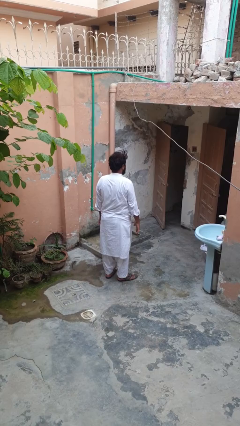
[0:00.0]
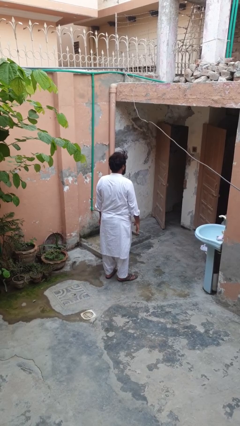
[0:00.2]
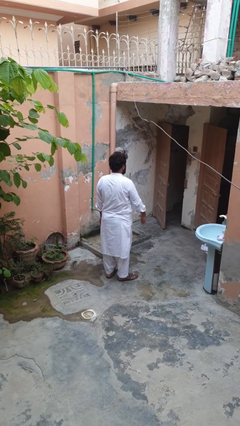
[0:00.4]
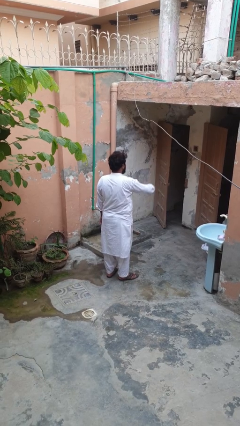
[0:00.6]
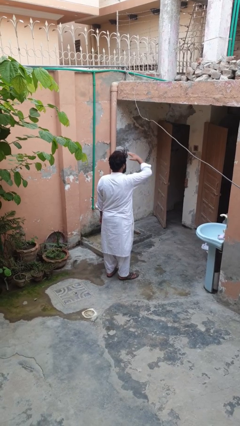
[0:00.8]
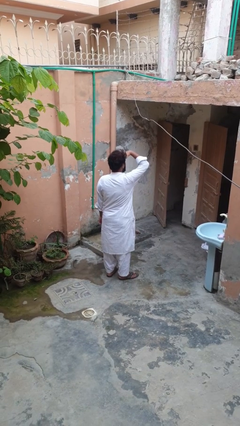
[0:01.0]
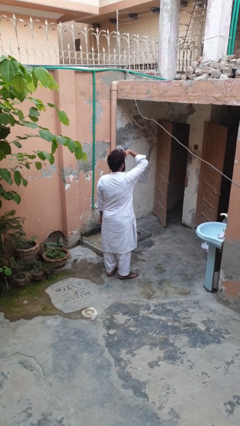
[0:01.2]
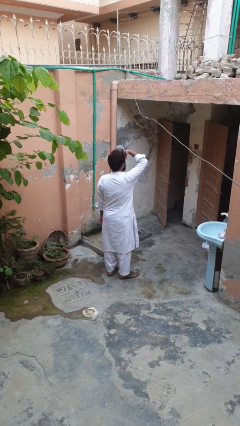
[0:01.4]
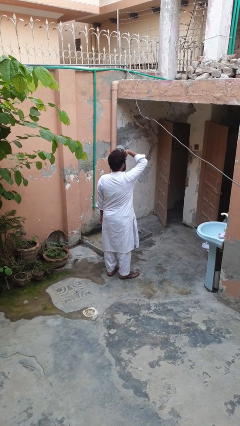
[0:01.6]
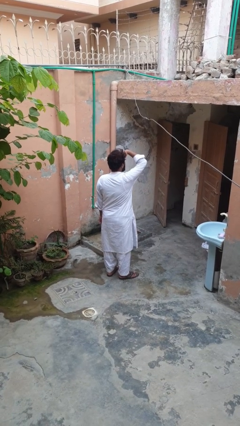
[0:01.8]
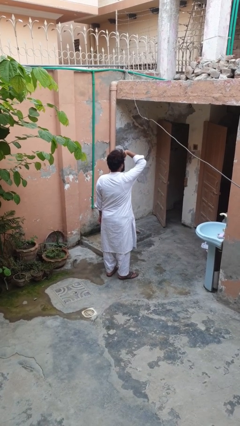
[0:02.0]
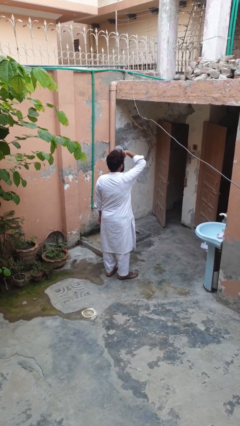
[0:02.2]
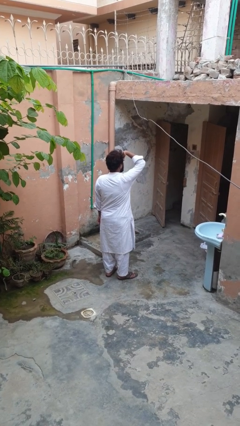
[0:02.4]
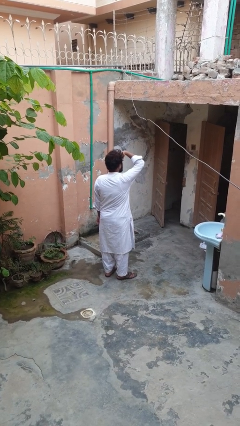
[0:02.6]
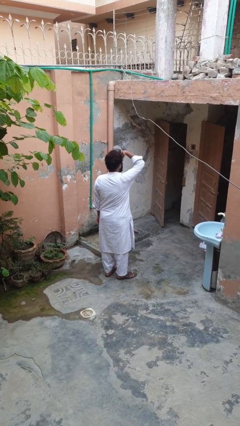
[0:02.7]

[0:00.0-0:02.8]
person shades eyes

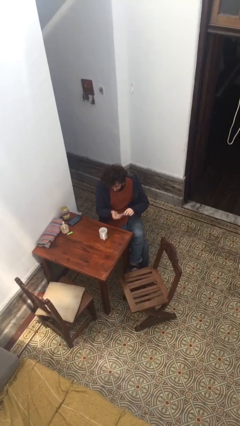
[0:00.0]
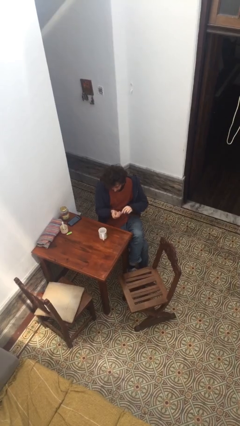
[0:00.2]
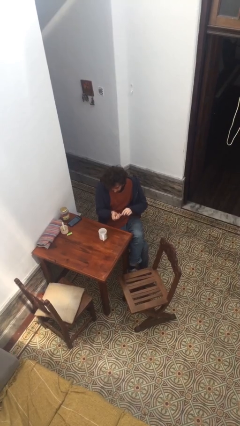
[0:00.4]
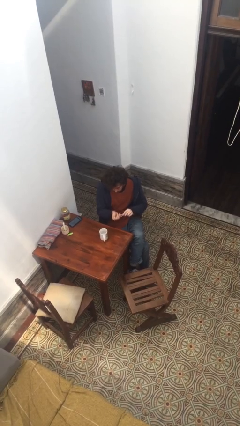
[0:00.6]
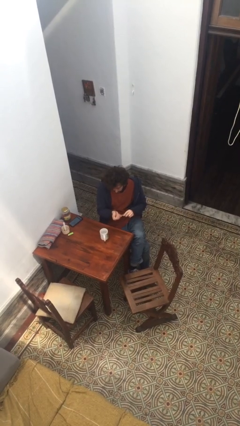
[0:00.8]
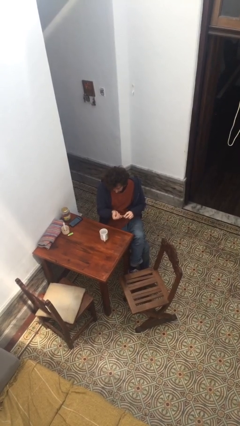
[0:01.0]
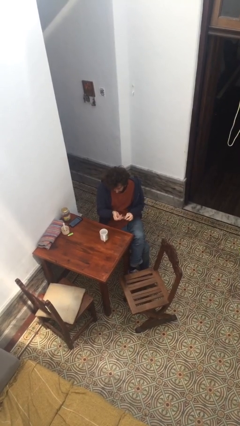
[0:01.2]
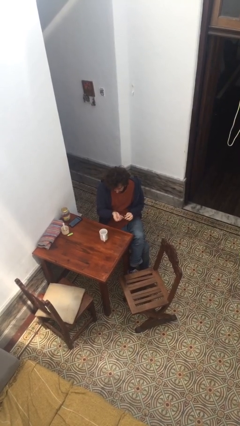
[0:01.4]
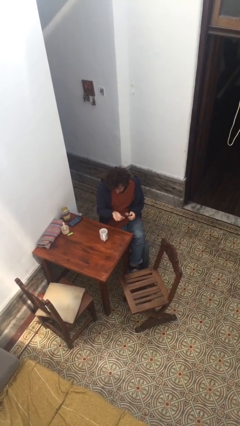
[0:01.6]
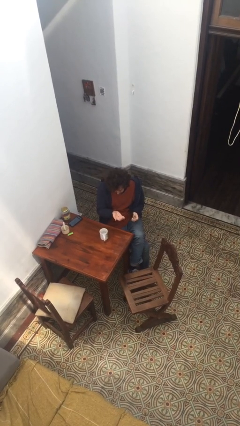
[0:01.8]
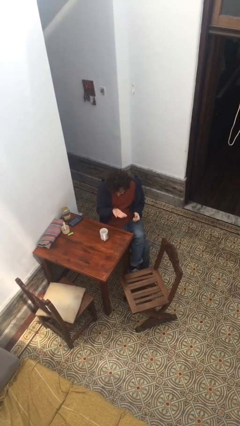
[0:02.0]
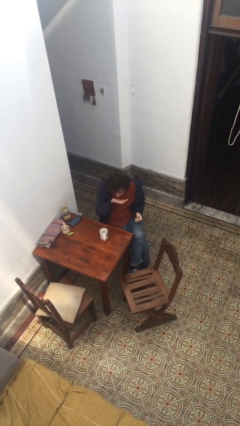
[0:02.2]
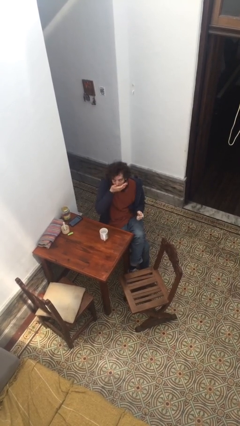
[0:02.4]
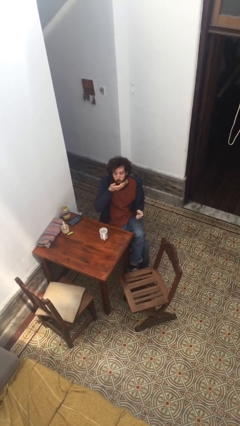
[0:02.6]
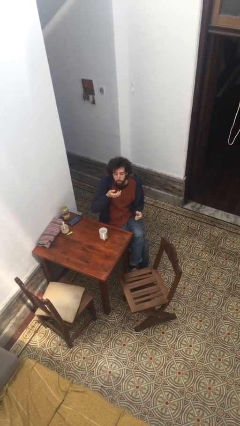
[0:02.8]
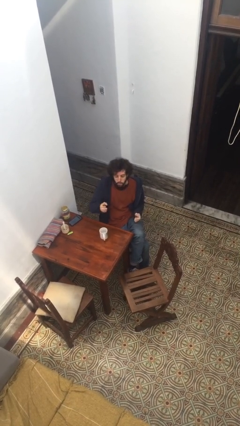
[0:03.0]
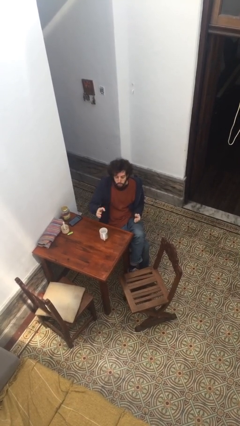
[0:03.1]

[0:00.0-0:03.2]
person takes medicine pills

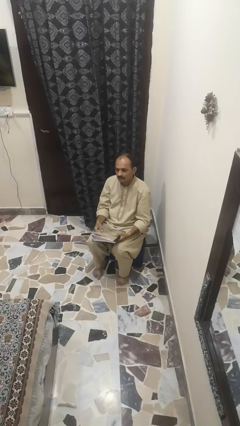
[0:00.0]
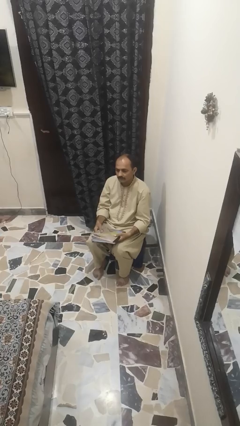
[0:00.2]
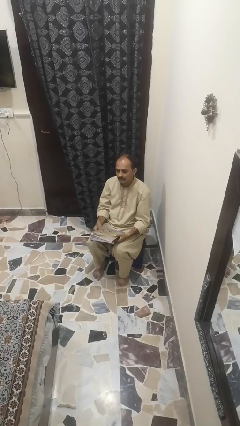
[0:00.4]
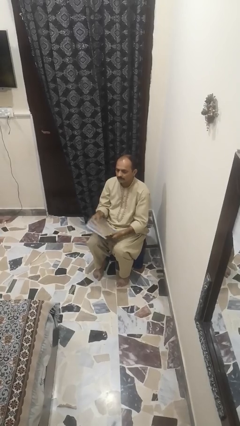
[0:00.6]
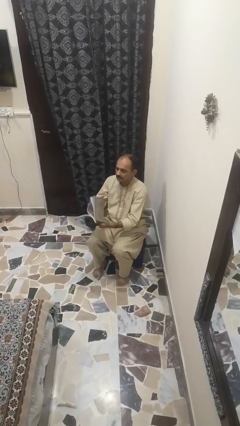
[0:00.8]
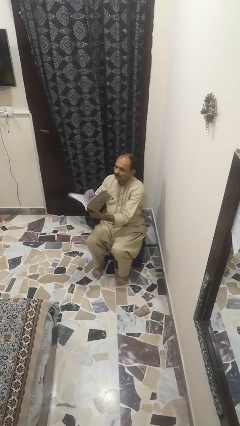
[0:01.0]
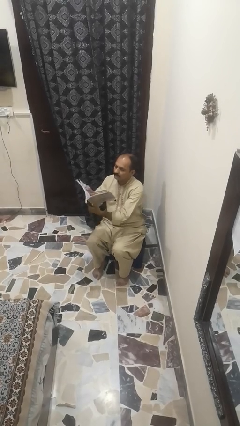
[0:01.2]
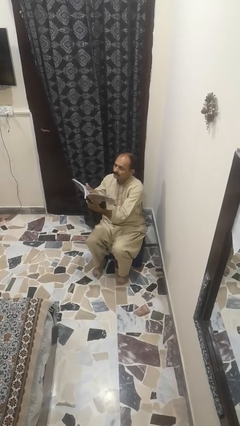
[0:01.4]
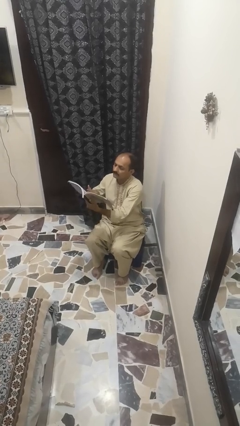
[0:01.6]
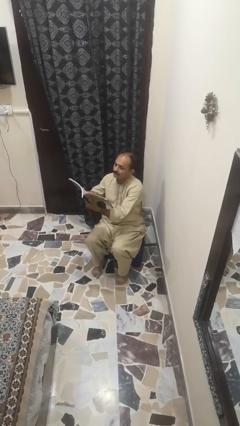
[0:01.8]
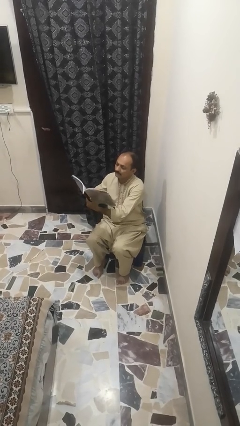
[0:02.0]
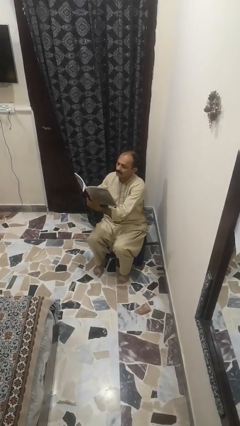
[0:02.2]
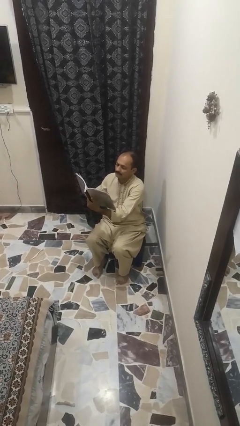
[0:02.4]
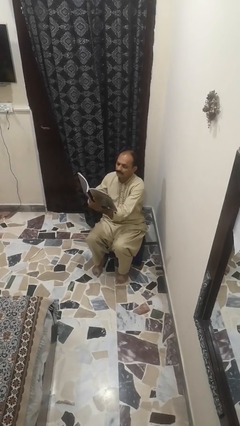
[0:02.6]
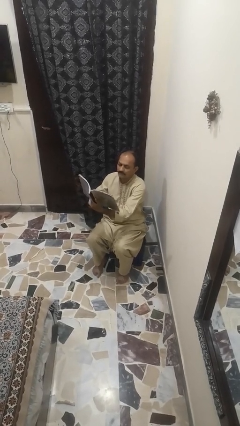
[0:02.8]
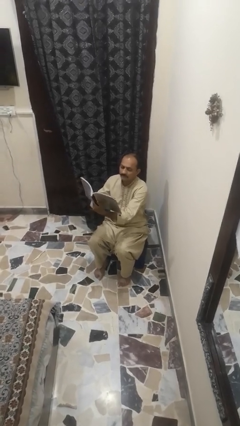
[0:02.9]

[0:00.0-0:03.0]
person reads book

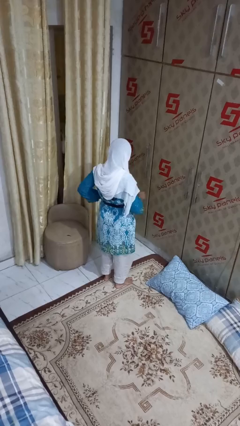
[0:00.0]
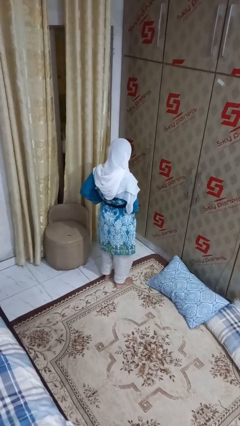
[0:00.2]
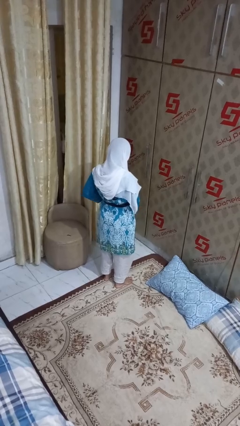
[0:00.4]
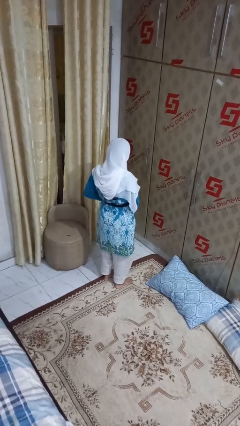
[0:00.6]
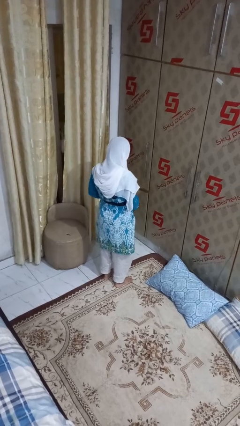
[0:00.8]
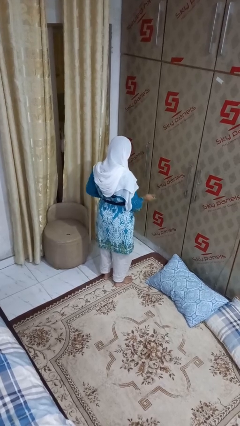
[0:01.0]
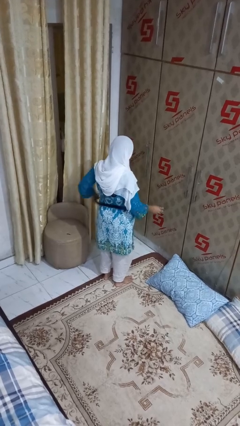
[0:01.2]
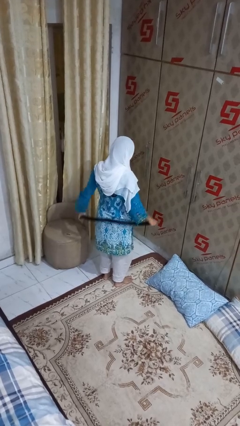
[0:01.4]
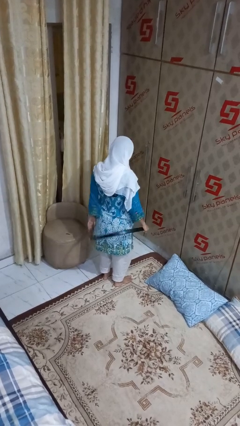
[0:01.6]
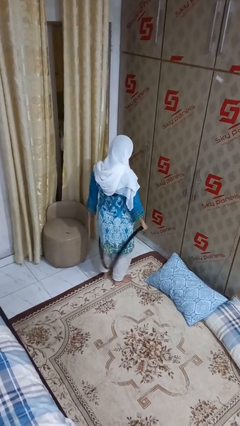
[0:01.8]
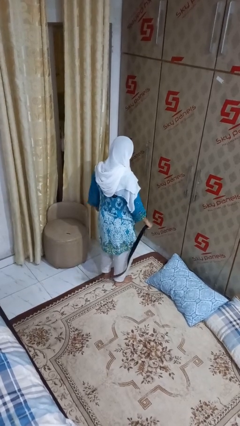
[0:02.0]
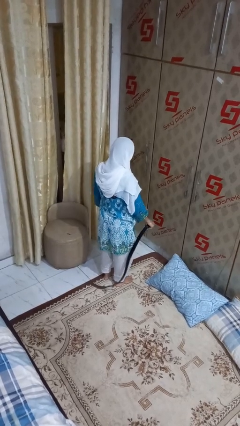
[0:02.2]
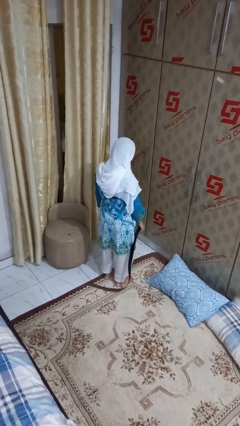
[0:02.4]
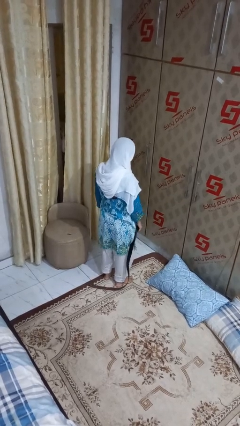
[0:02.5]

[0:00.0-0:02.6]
person takes off belt

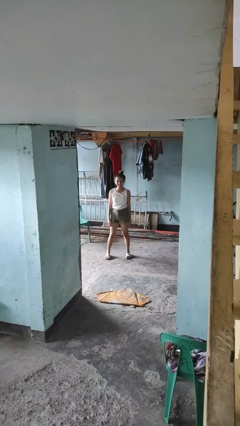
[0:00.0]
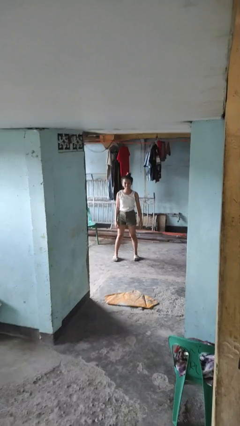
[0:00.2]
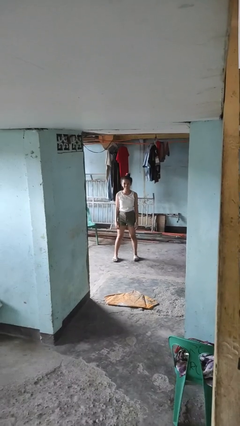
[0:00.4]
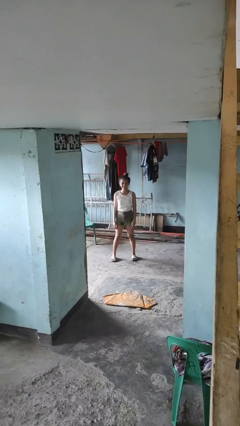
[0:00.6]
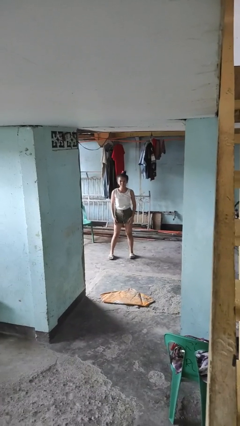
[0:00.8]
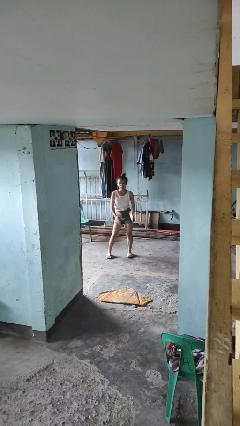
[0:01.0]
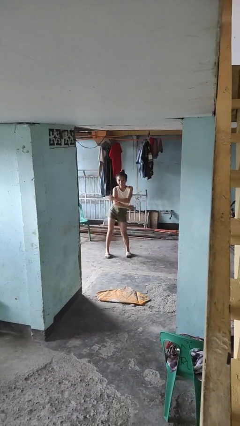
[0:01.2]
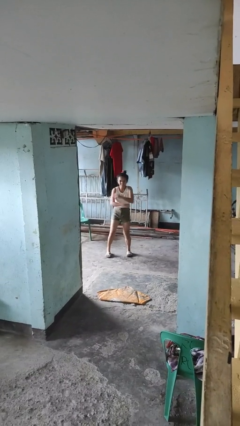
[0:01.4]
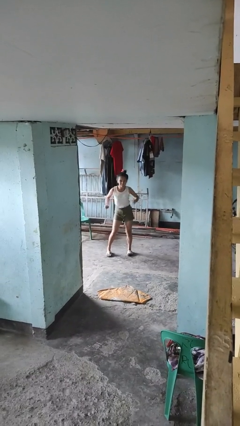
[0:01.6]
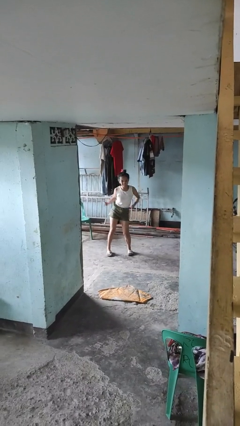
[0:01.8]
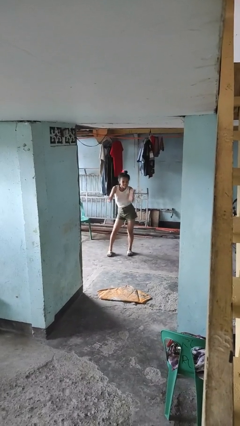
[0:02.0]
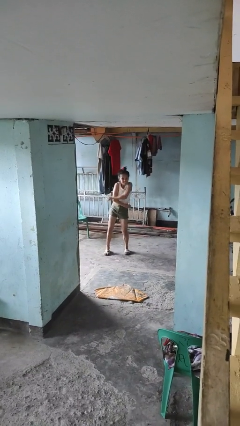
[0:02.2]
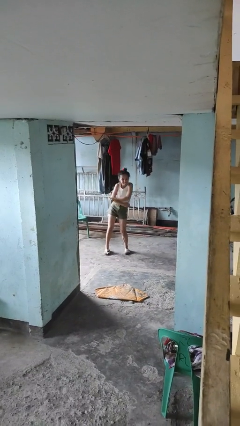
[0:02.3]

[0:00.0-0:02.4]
person dances in place

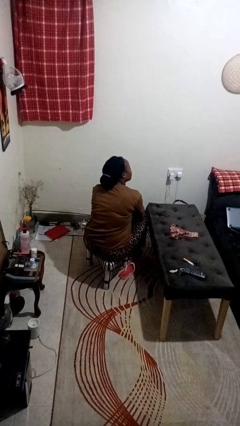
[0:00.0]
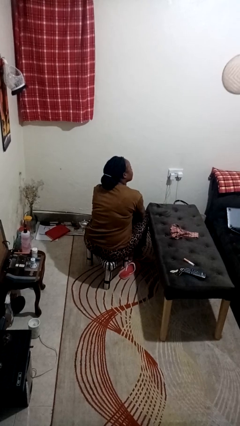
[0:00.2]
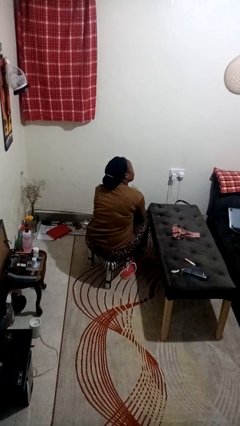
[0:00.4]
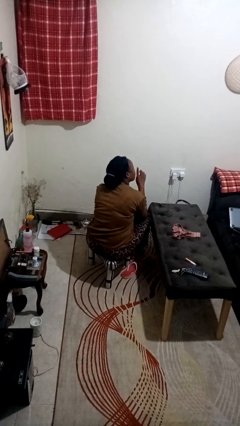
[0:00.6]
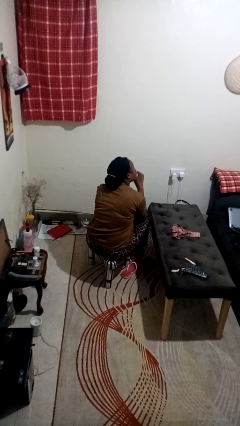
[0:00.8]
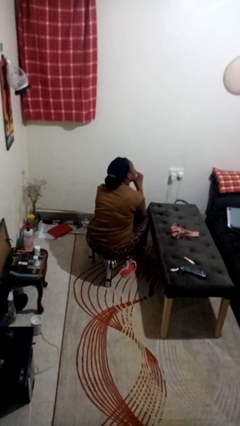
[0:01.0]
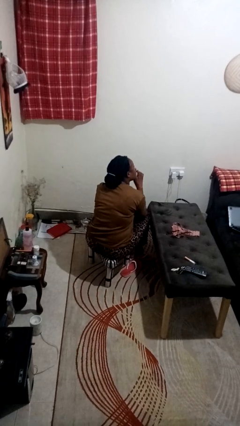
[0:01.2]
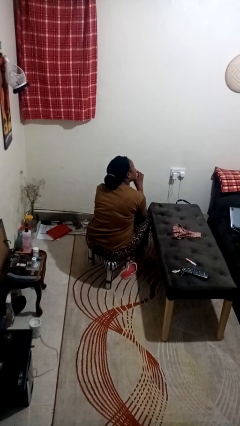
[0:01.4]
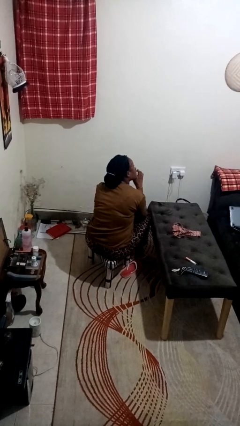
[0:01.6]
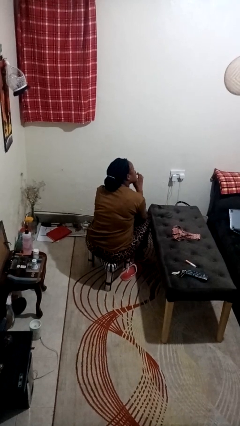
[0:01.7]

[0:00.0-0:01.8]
person gestures be quiet

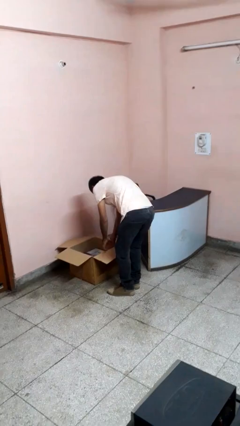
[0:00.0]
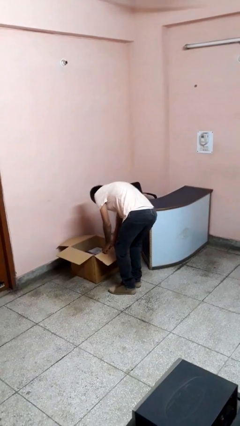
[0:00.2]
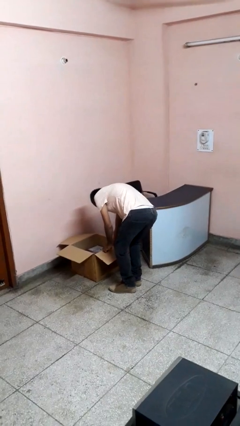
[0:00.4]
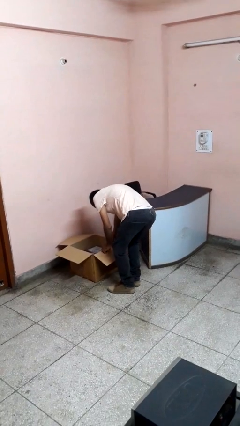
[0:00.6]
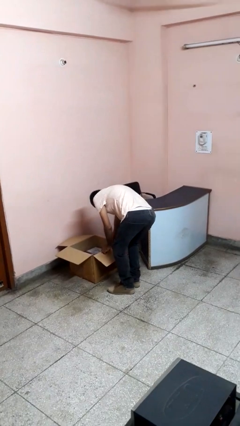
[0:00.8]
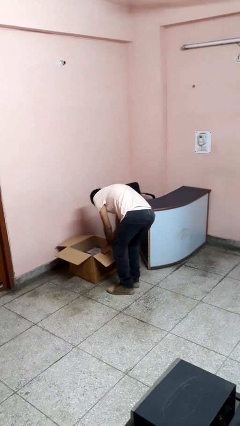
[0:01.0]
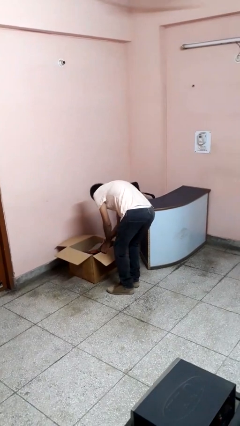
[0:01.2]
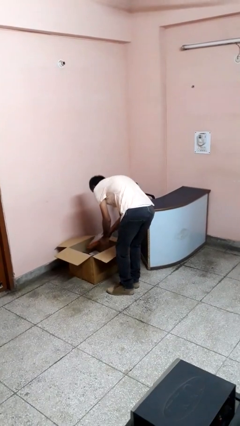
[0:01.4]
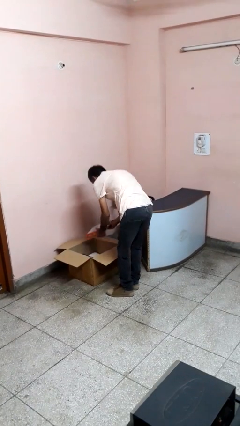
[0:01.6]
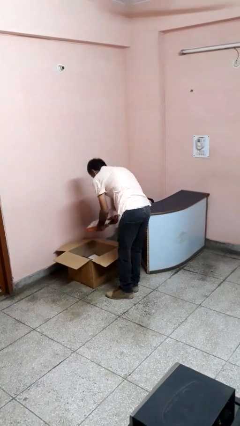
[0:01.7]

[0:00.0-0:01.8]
person takes object from box
